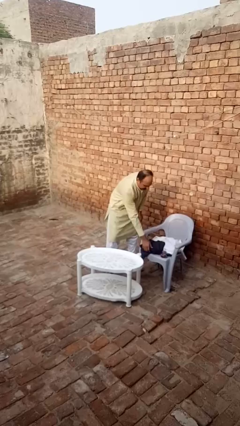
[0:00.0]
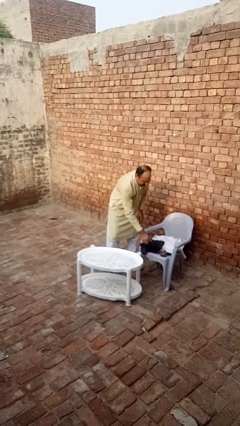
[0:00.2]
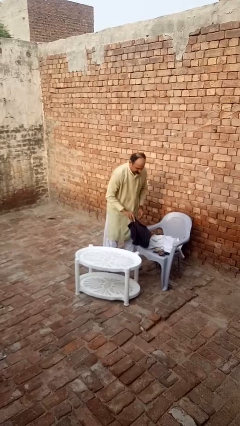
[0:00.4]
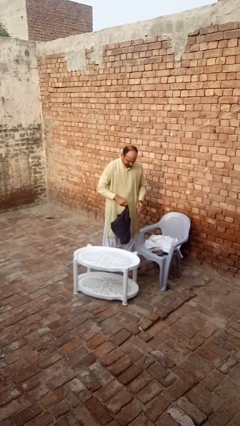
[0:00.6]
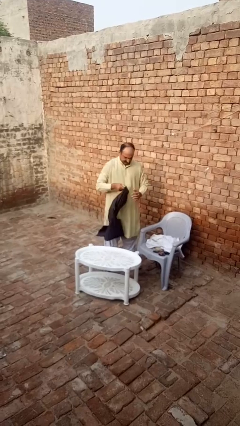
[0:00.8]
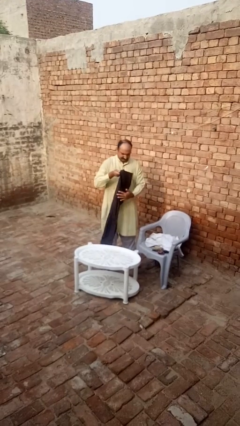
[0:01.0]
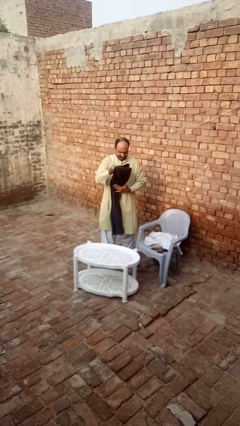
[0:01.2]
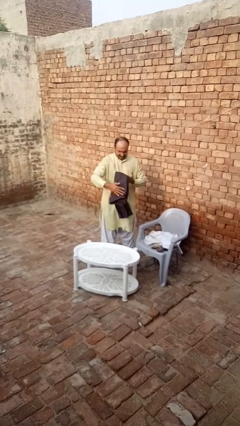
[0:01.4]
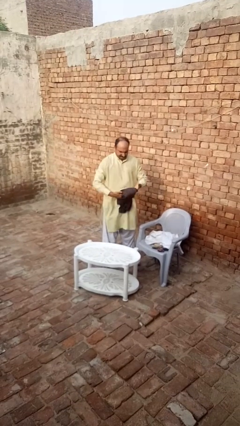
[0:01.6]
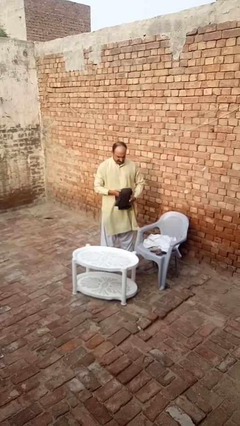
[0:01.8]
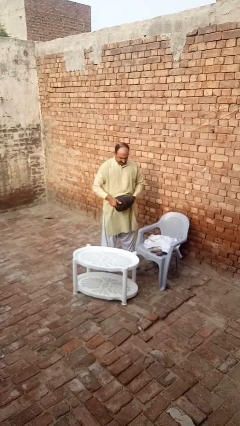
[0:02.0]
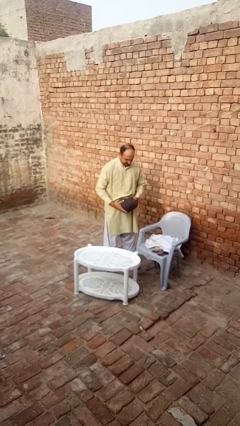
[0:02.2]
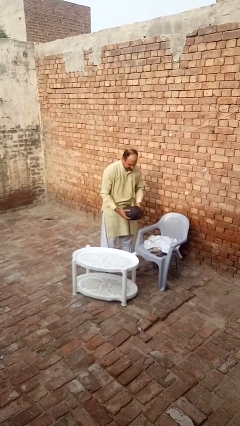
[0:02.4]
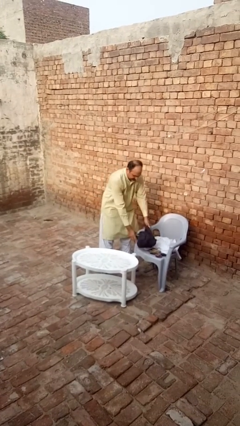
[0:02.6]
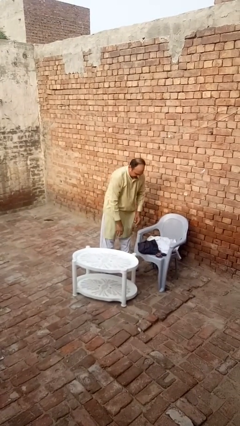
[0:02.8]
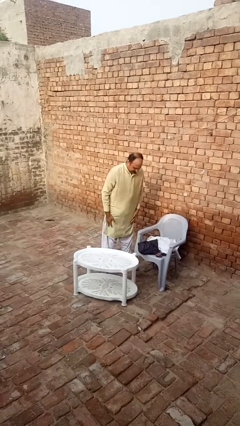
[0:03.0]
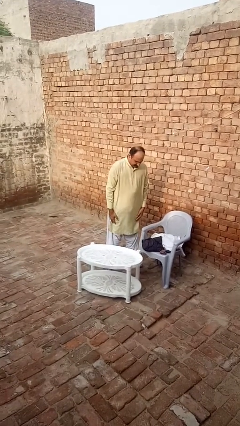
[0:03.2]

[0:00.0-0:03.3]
person folds pants

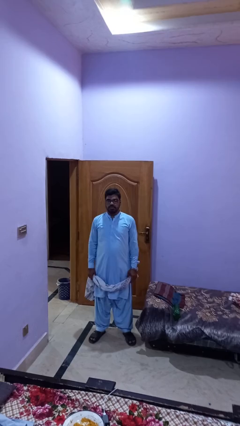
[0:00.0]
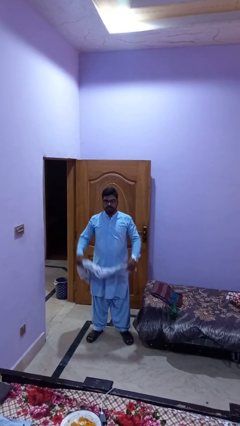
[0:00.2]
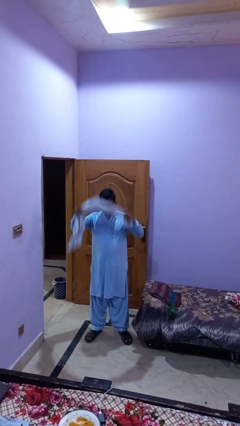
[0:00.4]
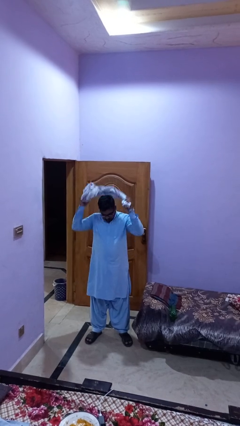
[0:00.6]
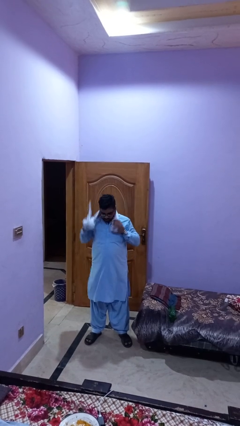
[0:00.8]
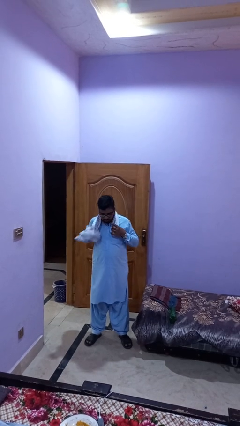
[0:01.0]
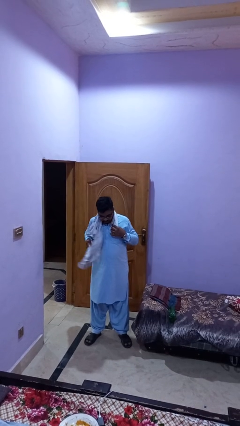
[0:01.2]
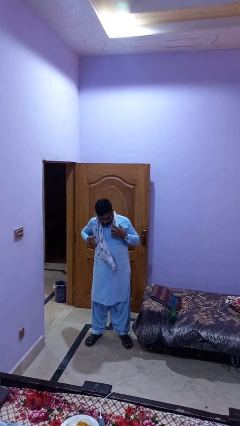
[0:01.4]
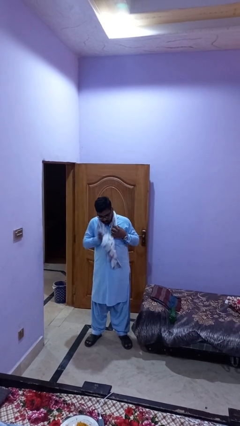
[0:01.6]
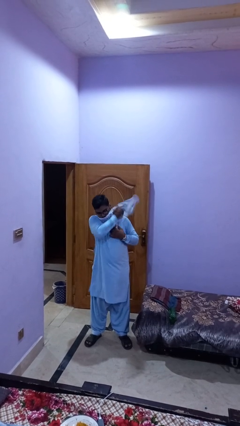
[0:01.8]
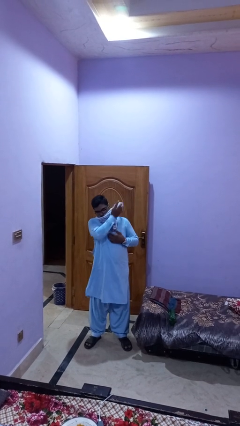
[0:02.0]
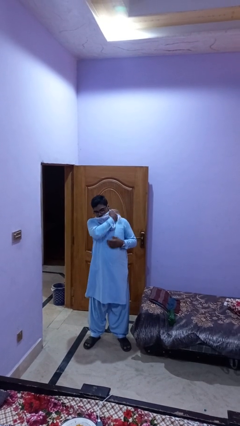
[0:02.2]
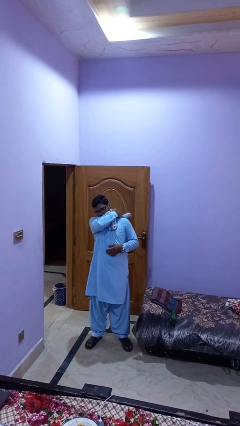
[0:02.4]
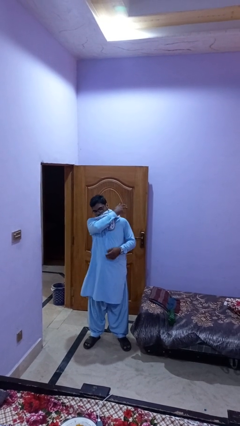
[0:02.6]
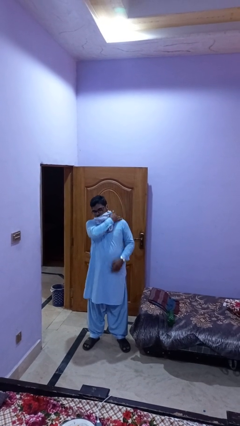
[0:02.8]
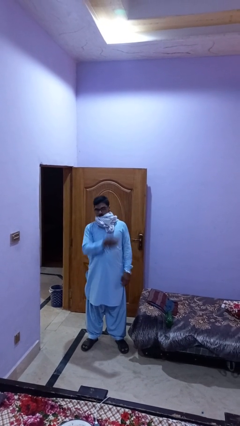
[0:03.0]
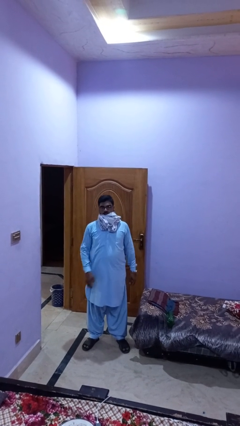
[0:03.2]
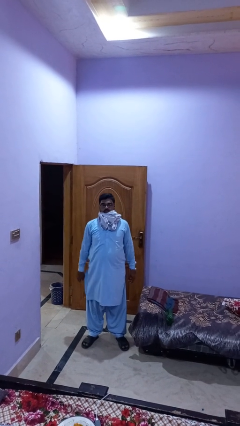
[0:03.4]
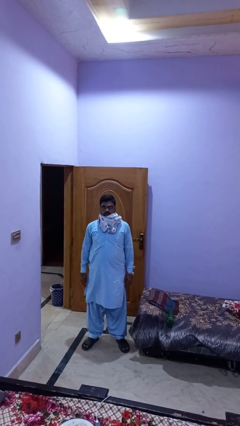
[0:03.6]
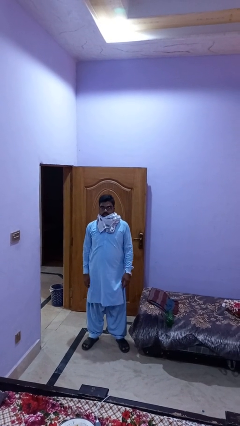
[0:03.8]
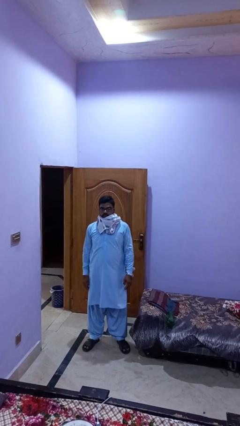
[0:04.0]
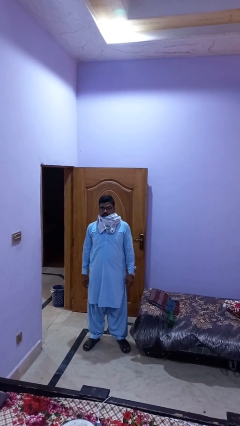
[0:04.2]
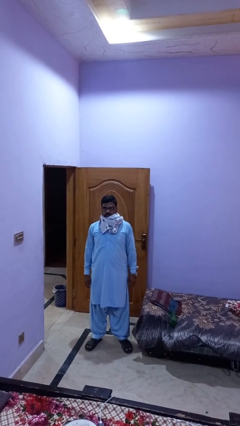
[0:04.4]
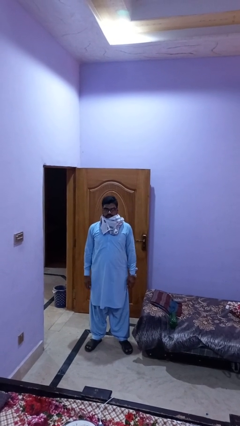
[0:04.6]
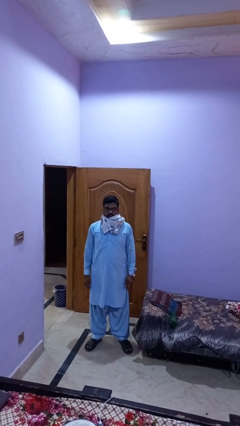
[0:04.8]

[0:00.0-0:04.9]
person puts on scarf

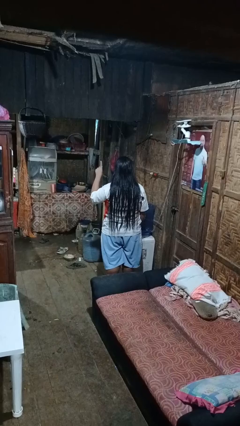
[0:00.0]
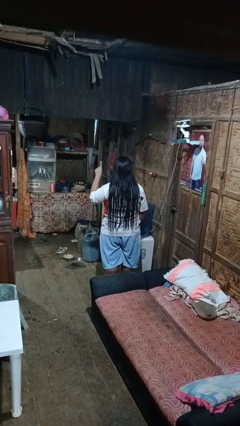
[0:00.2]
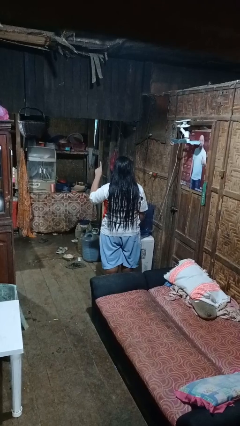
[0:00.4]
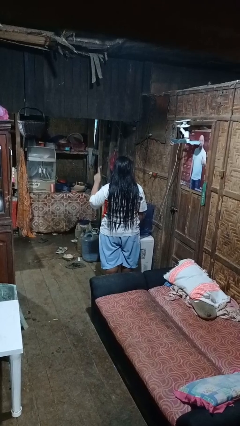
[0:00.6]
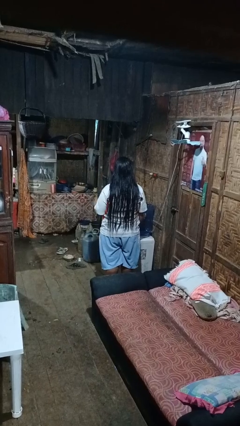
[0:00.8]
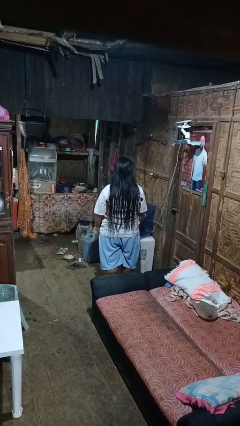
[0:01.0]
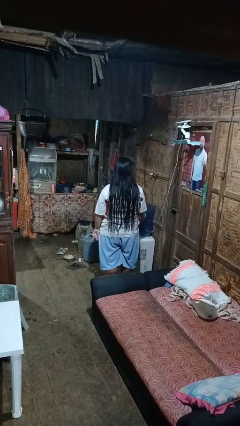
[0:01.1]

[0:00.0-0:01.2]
person gestures number one

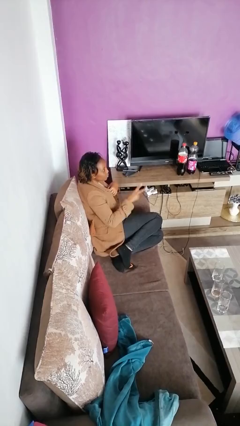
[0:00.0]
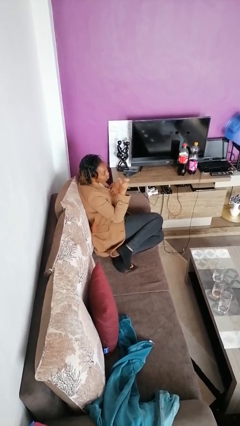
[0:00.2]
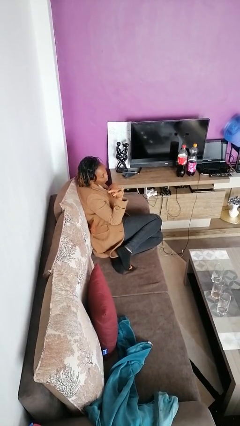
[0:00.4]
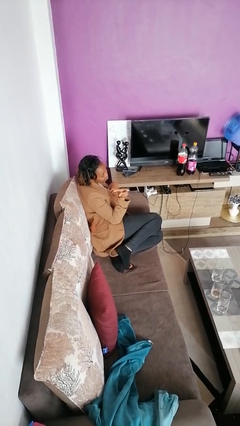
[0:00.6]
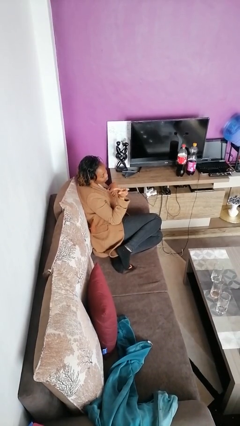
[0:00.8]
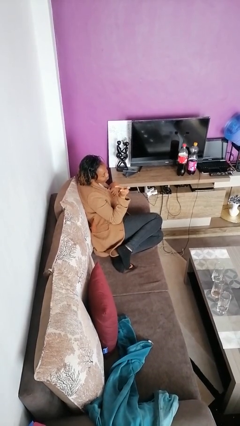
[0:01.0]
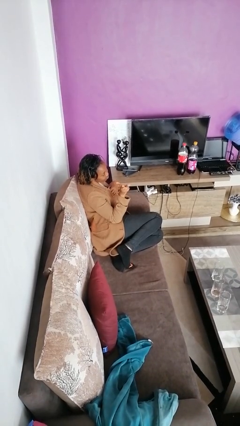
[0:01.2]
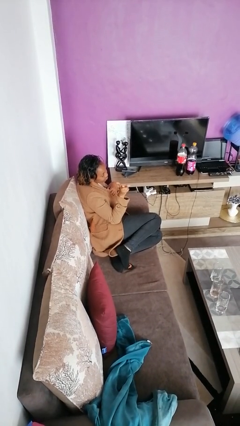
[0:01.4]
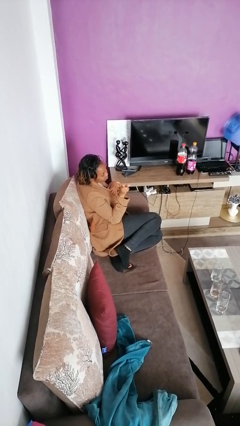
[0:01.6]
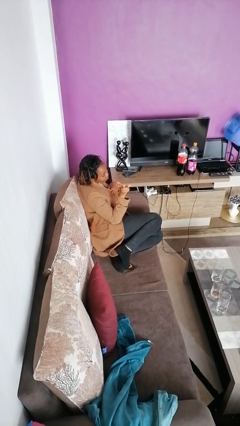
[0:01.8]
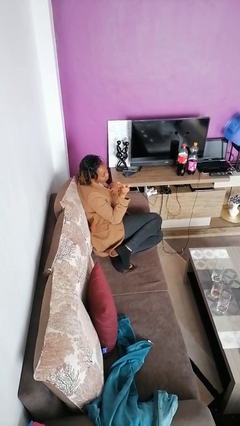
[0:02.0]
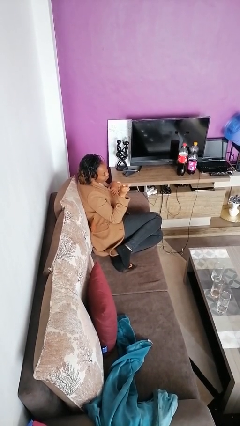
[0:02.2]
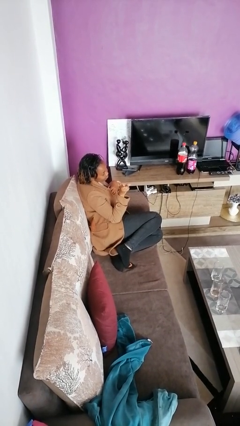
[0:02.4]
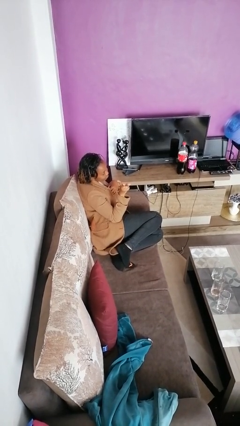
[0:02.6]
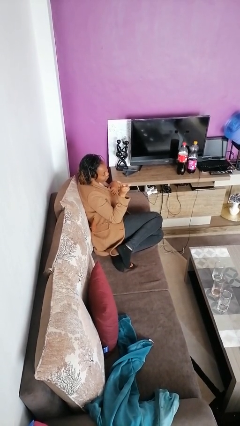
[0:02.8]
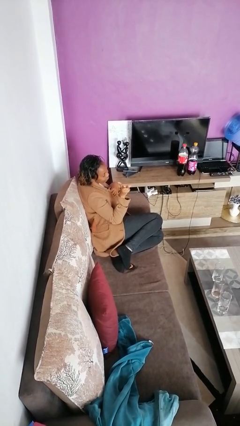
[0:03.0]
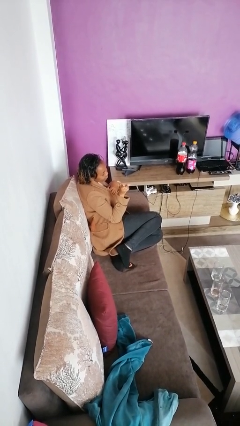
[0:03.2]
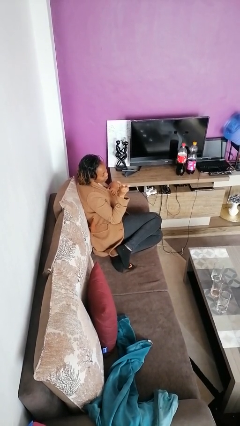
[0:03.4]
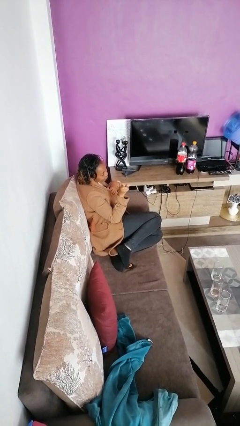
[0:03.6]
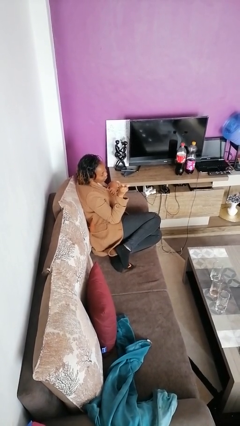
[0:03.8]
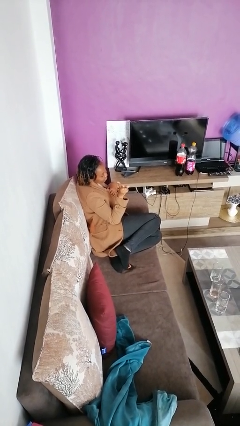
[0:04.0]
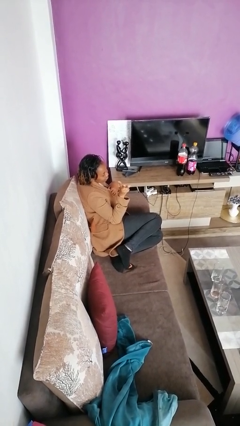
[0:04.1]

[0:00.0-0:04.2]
person gestures peace

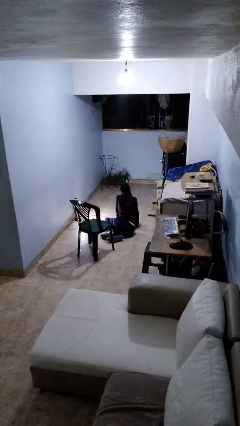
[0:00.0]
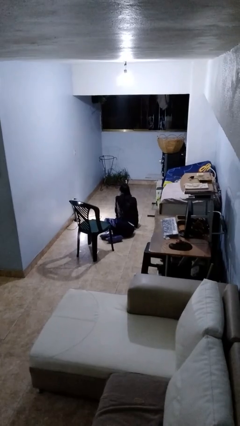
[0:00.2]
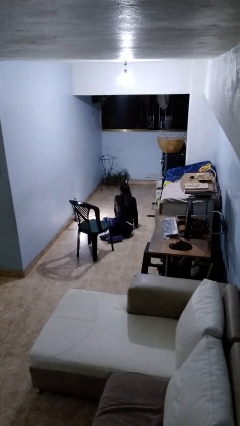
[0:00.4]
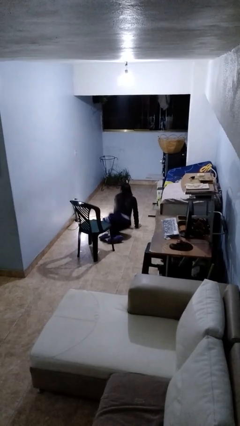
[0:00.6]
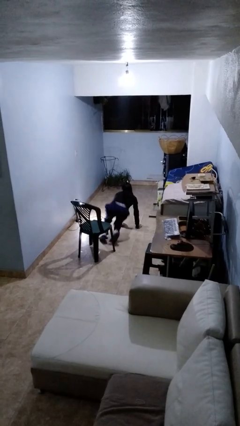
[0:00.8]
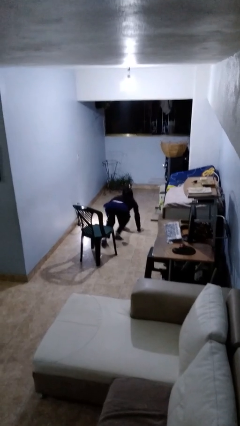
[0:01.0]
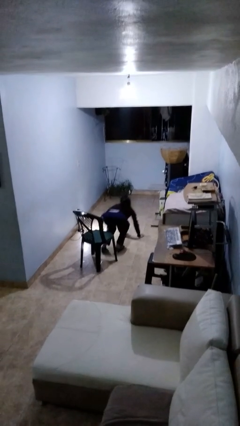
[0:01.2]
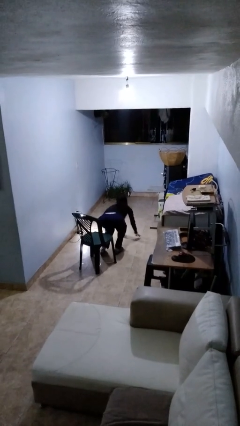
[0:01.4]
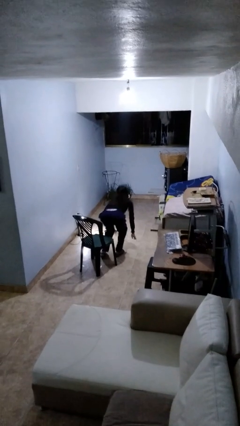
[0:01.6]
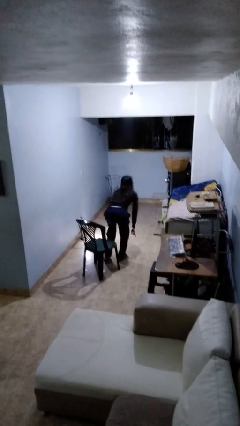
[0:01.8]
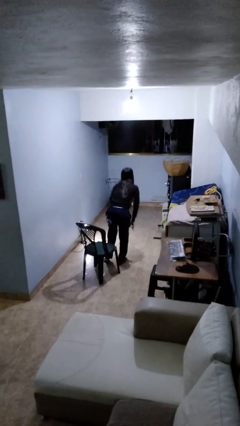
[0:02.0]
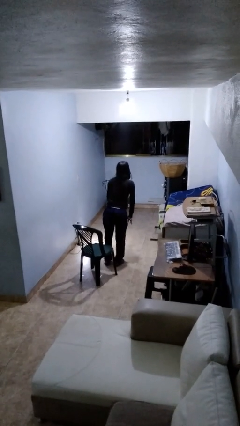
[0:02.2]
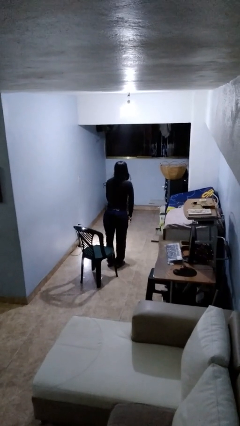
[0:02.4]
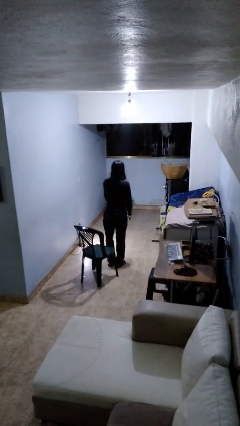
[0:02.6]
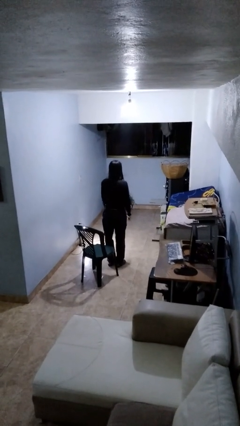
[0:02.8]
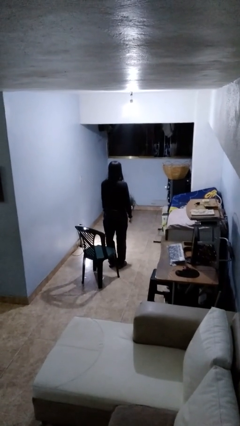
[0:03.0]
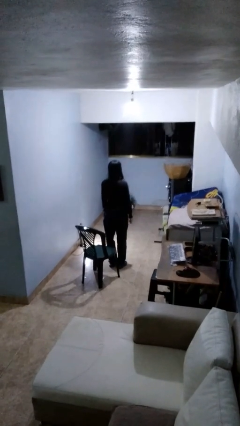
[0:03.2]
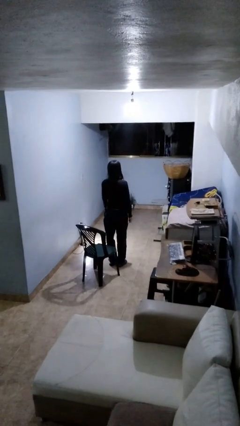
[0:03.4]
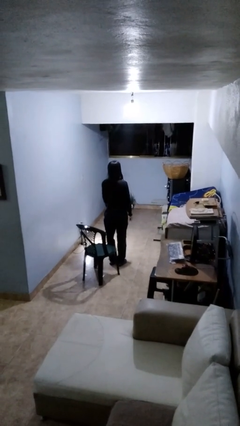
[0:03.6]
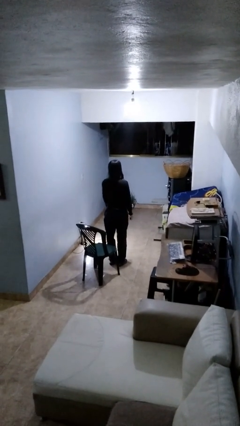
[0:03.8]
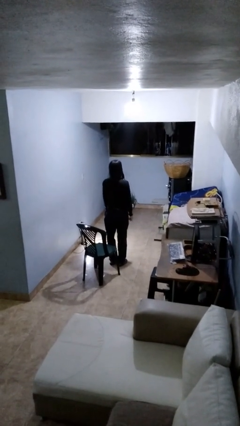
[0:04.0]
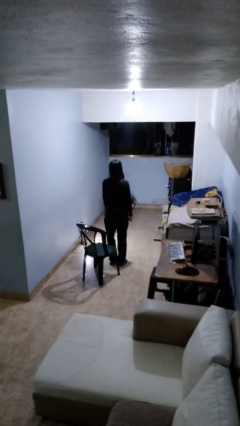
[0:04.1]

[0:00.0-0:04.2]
person stands up from floor

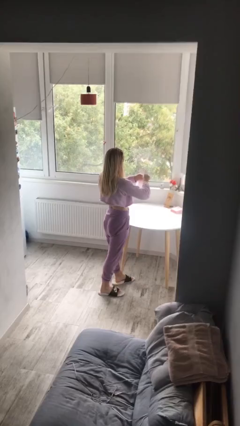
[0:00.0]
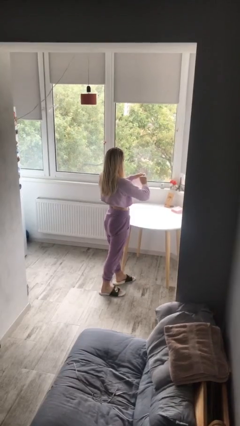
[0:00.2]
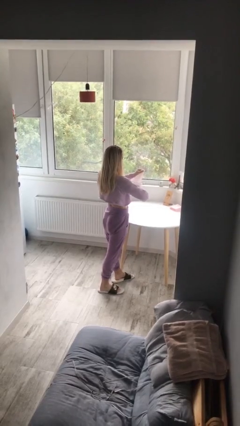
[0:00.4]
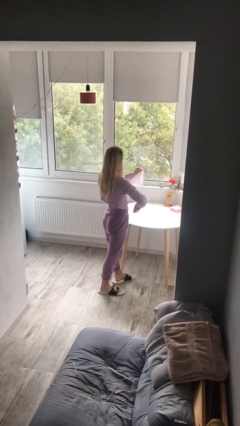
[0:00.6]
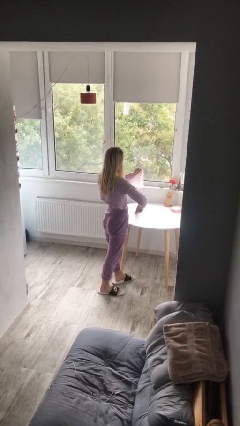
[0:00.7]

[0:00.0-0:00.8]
person tears paper
